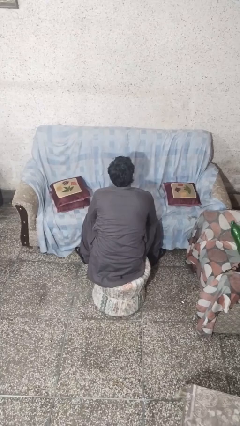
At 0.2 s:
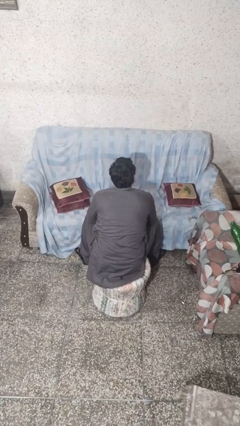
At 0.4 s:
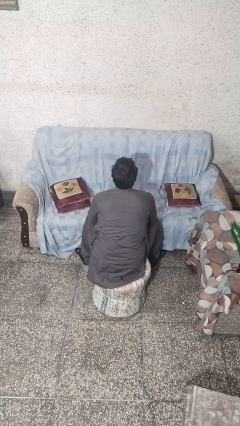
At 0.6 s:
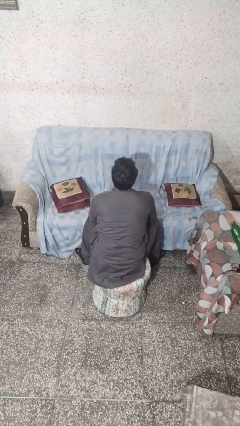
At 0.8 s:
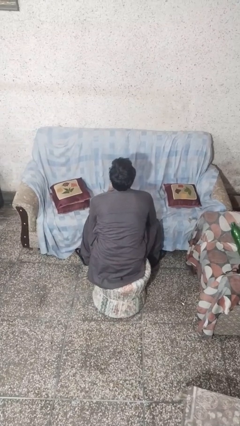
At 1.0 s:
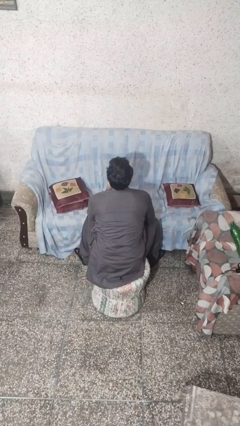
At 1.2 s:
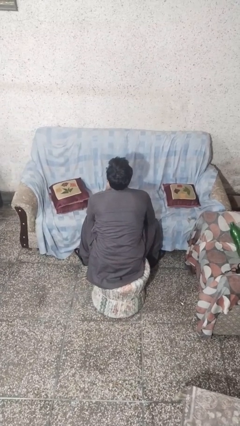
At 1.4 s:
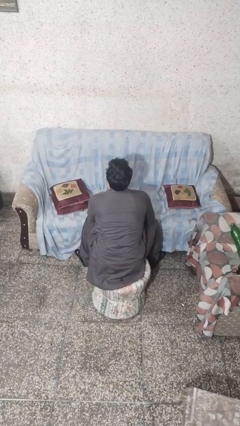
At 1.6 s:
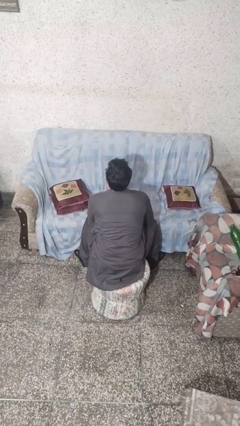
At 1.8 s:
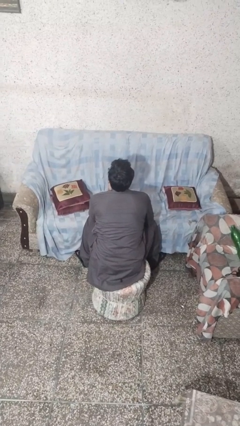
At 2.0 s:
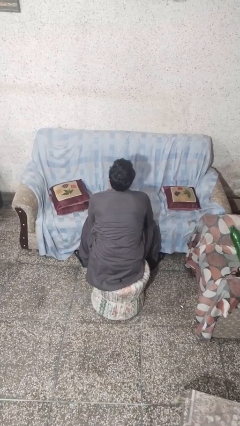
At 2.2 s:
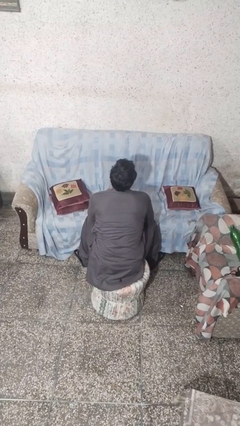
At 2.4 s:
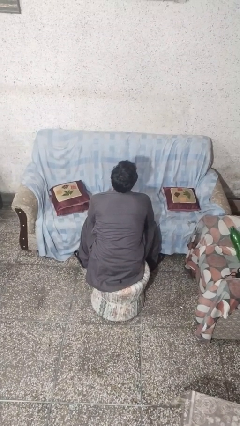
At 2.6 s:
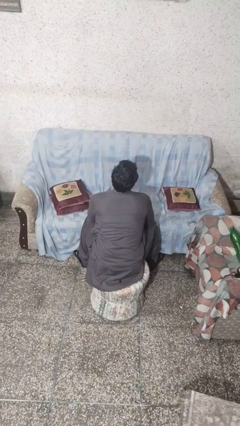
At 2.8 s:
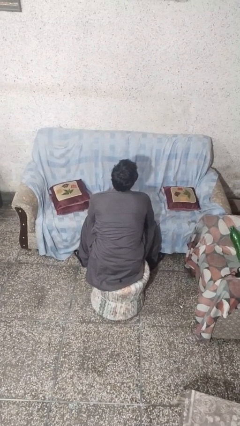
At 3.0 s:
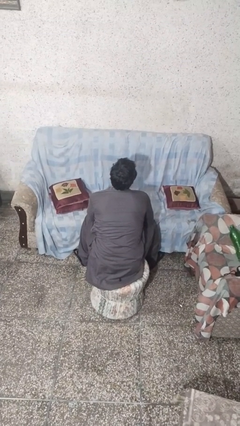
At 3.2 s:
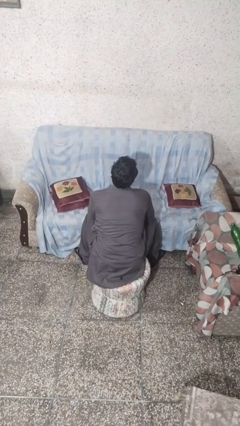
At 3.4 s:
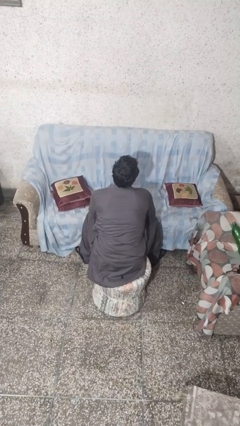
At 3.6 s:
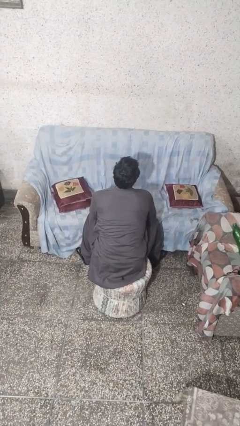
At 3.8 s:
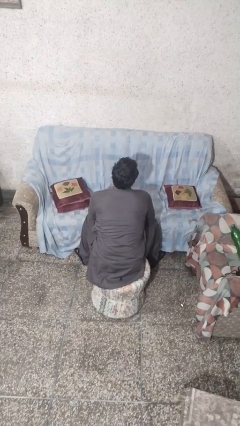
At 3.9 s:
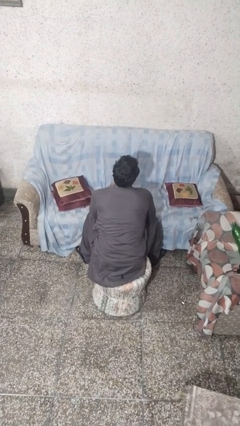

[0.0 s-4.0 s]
person strokes chin

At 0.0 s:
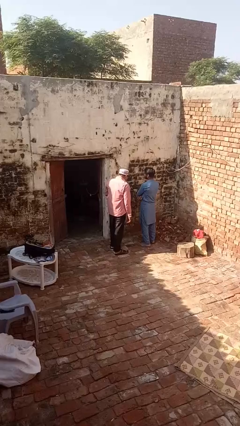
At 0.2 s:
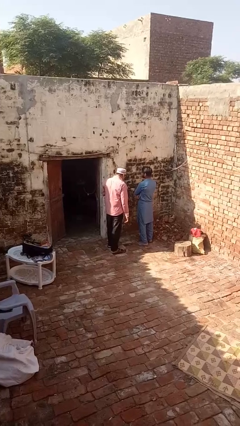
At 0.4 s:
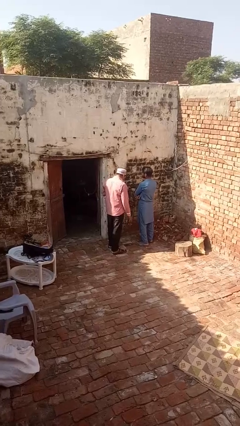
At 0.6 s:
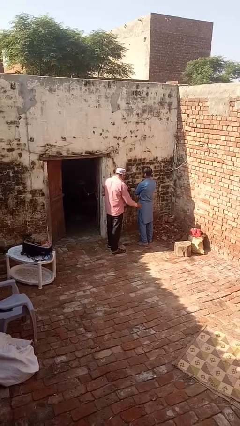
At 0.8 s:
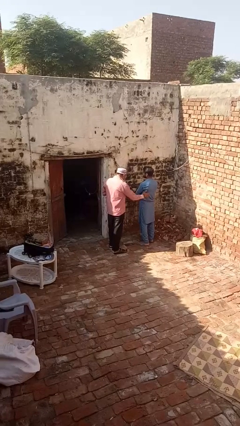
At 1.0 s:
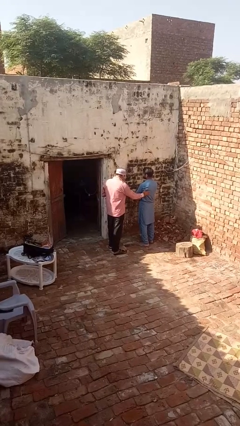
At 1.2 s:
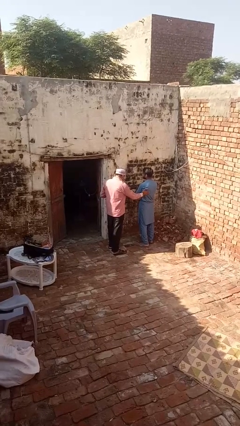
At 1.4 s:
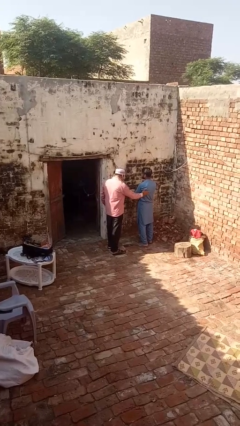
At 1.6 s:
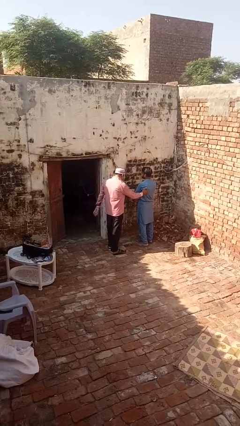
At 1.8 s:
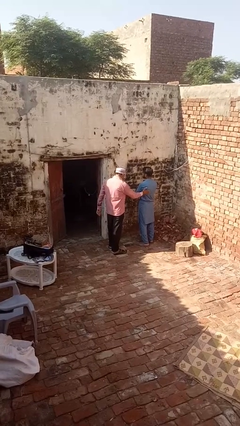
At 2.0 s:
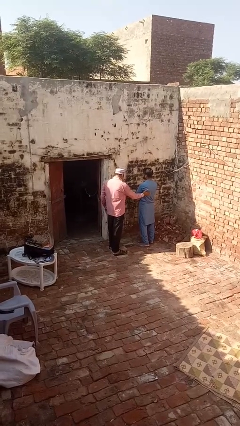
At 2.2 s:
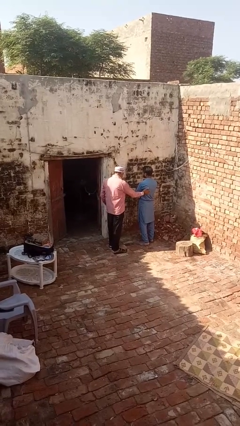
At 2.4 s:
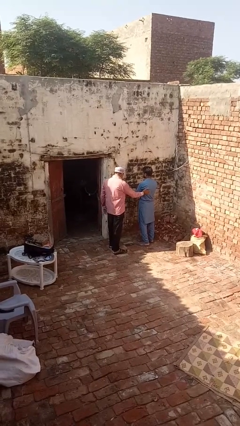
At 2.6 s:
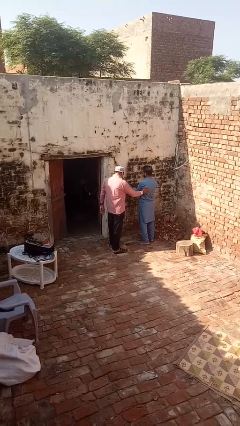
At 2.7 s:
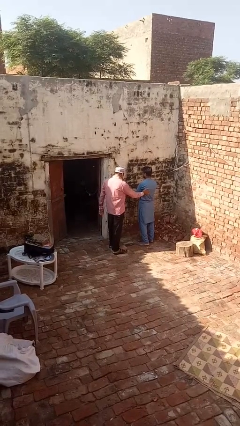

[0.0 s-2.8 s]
person shoves person

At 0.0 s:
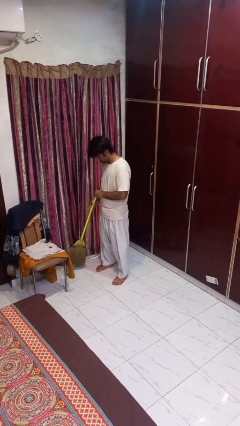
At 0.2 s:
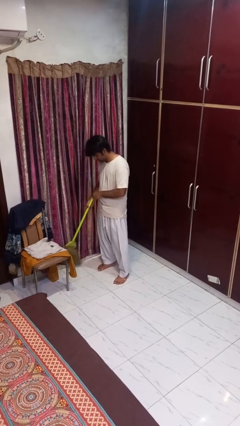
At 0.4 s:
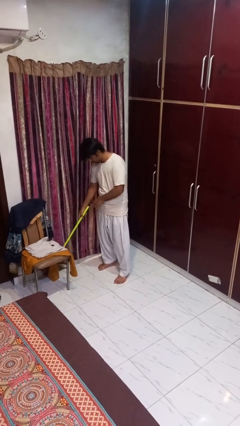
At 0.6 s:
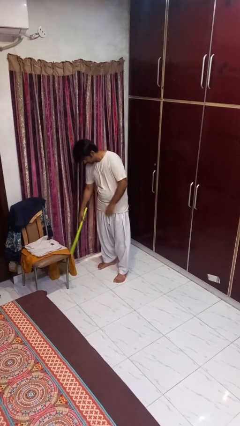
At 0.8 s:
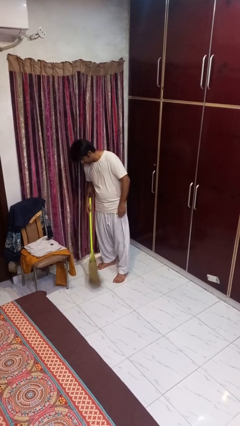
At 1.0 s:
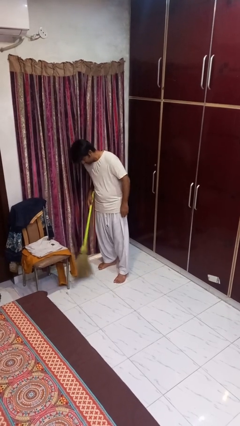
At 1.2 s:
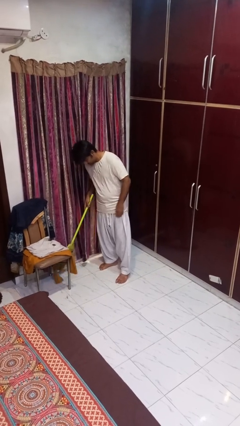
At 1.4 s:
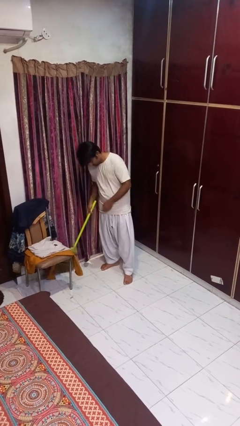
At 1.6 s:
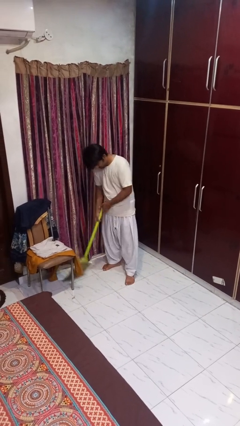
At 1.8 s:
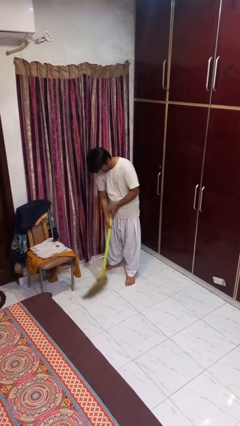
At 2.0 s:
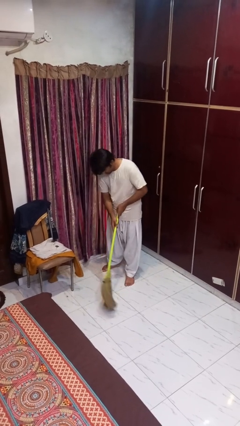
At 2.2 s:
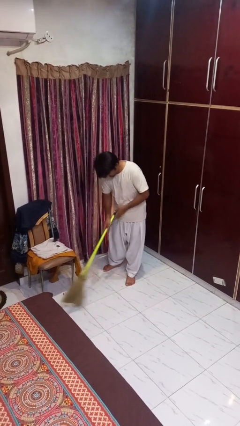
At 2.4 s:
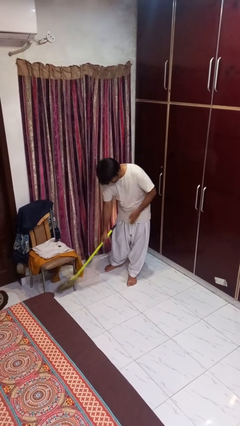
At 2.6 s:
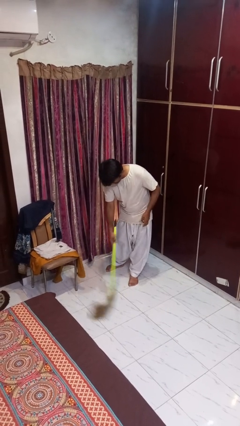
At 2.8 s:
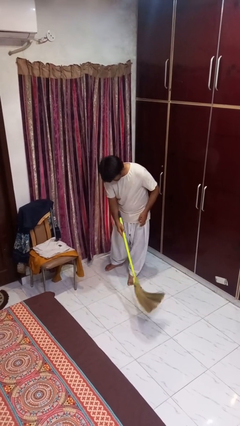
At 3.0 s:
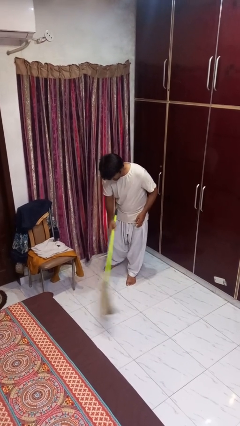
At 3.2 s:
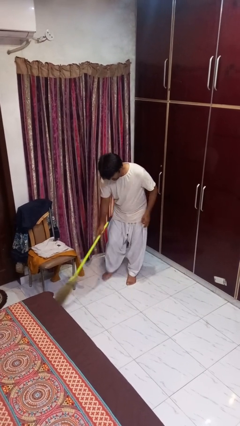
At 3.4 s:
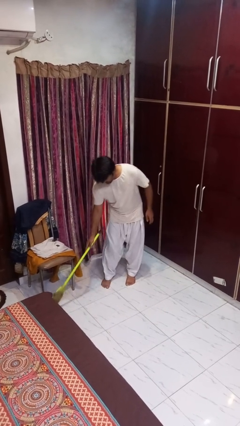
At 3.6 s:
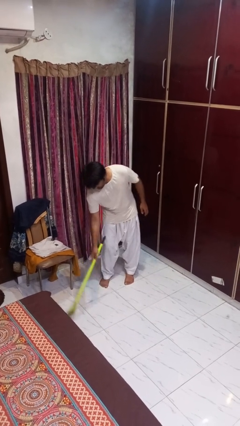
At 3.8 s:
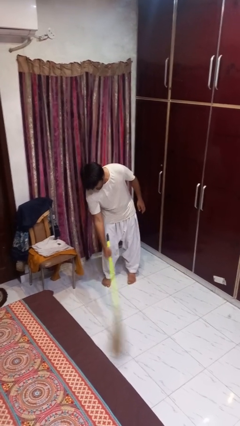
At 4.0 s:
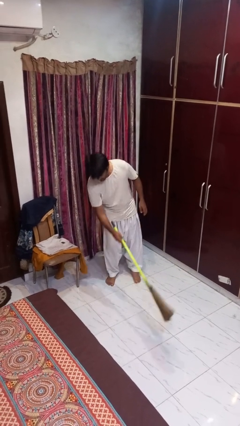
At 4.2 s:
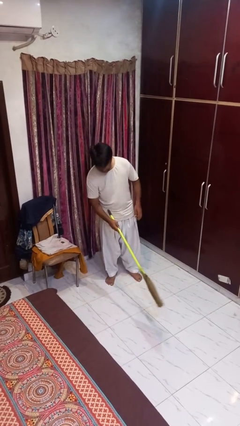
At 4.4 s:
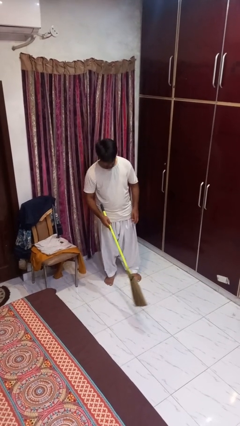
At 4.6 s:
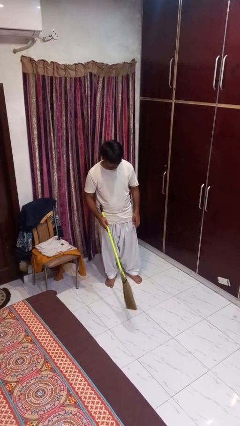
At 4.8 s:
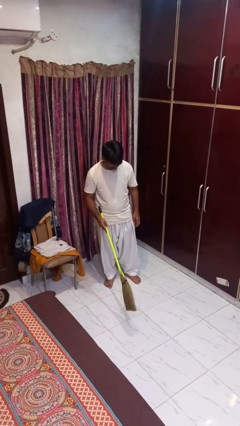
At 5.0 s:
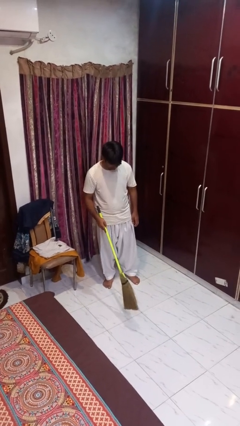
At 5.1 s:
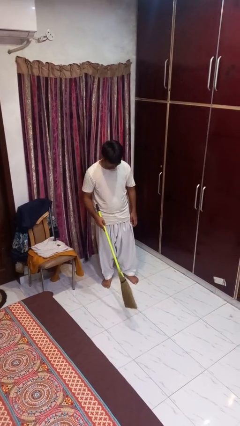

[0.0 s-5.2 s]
person sweeps floor

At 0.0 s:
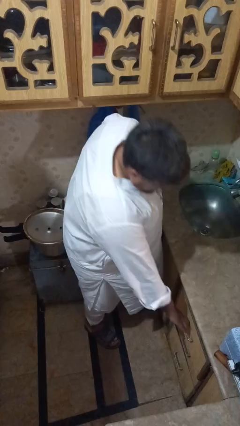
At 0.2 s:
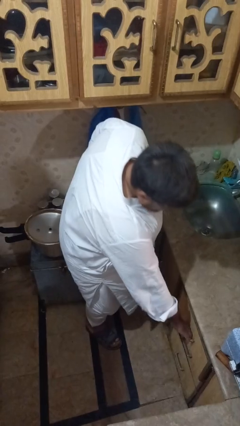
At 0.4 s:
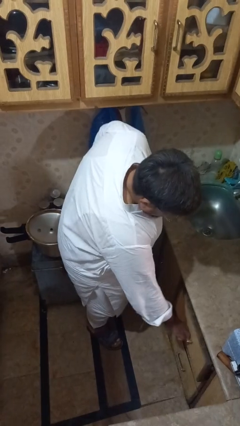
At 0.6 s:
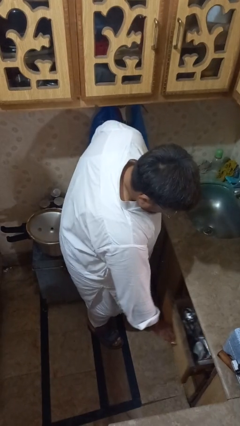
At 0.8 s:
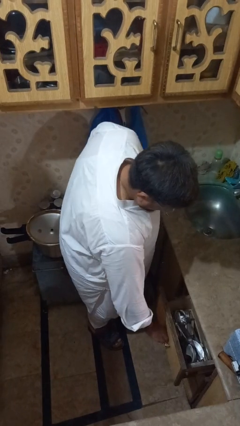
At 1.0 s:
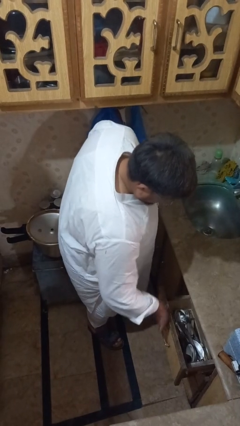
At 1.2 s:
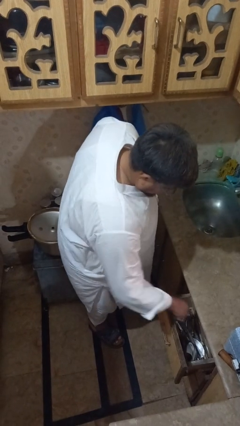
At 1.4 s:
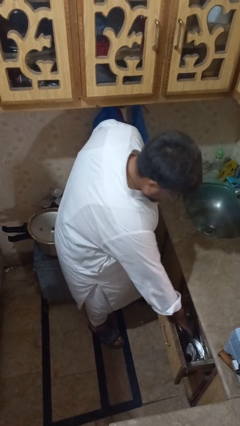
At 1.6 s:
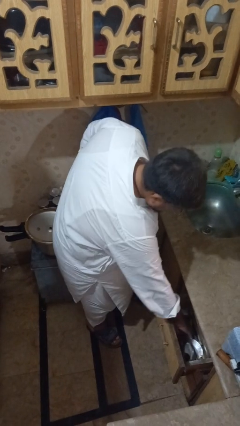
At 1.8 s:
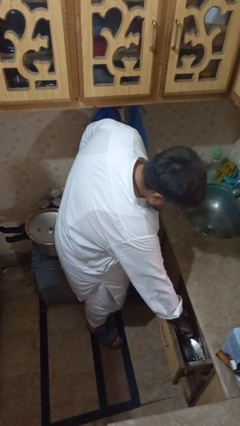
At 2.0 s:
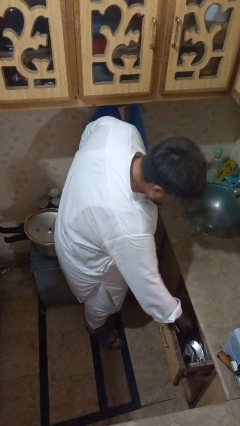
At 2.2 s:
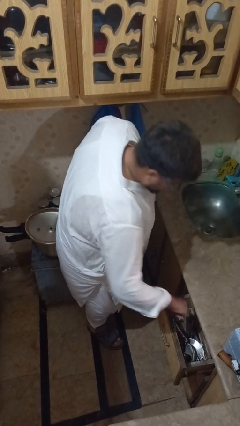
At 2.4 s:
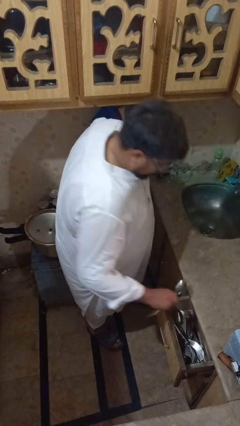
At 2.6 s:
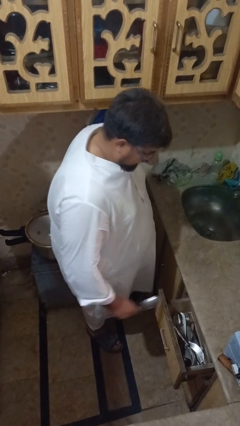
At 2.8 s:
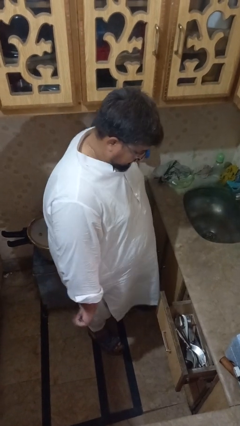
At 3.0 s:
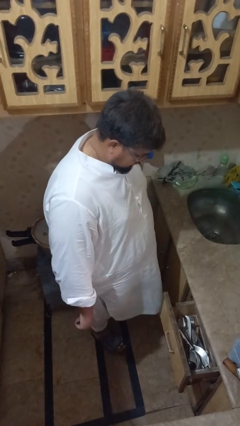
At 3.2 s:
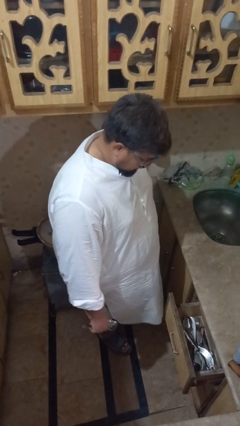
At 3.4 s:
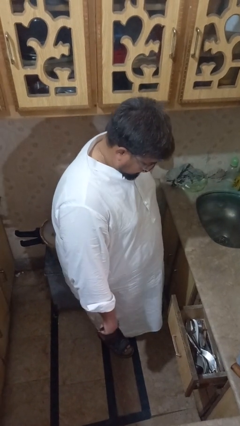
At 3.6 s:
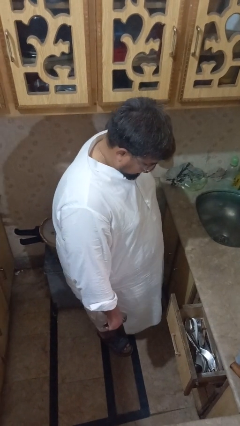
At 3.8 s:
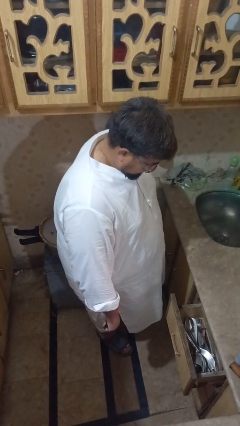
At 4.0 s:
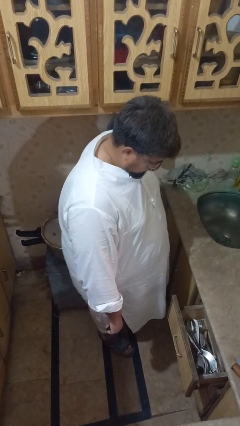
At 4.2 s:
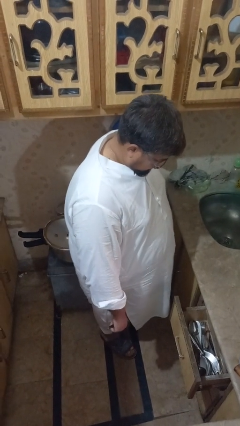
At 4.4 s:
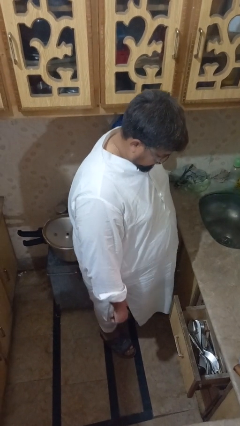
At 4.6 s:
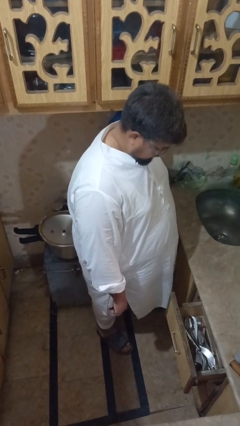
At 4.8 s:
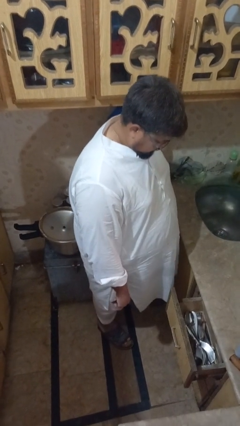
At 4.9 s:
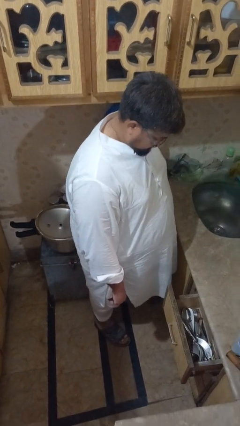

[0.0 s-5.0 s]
person takes object from kitchen drawer

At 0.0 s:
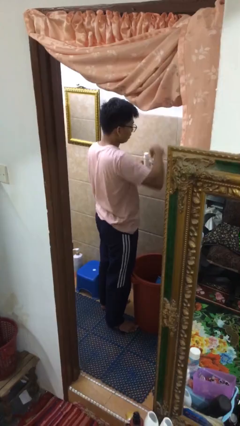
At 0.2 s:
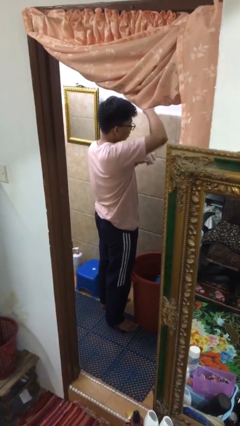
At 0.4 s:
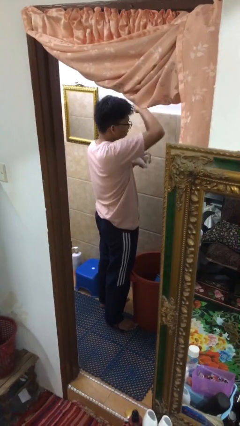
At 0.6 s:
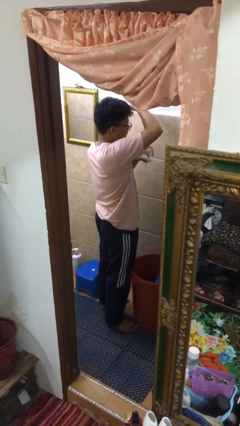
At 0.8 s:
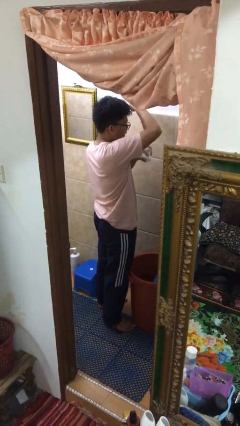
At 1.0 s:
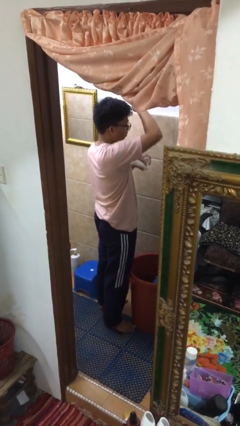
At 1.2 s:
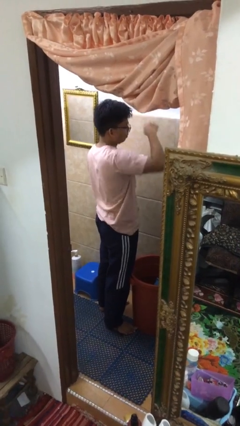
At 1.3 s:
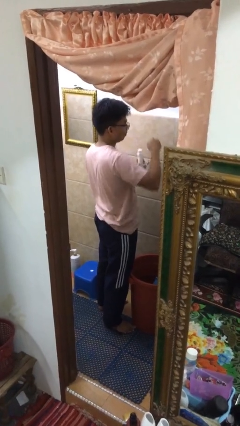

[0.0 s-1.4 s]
person applies deodorant
